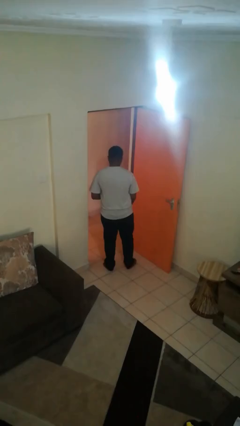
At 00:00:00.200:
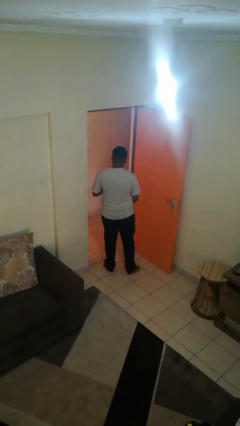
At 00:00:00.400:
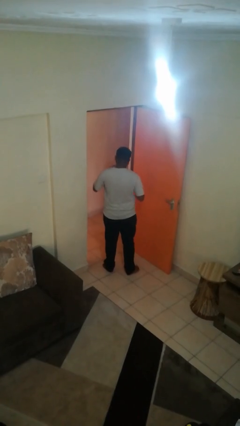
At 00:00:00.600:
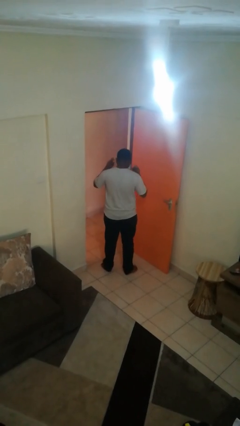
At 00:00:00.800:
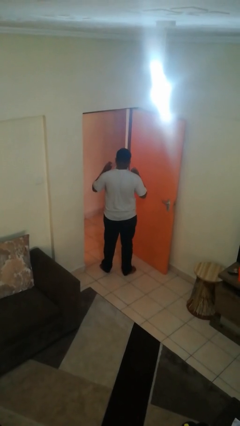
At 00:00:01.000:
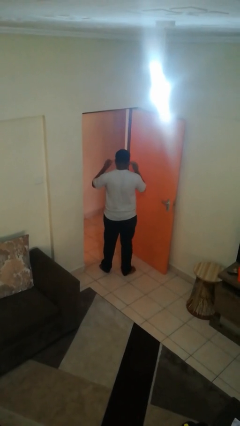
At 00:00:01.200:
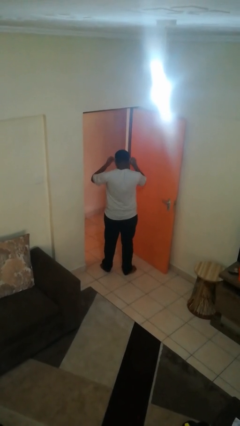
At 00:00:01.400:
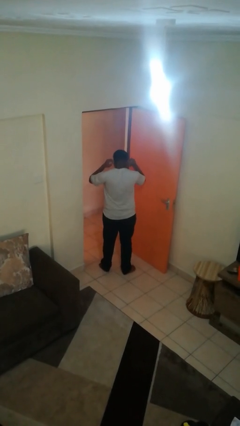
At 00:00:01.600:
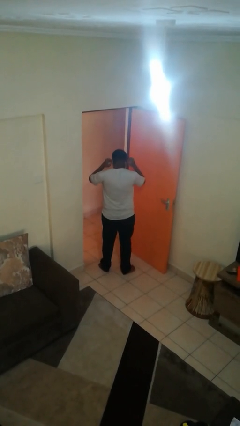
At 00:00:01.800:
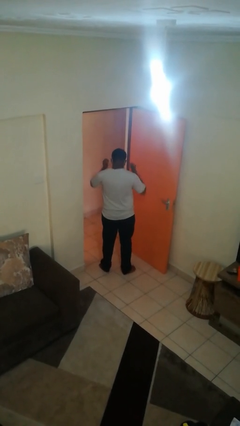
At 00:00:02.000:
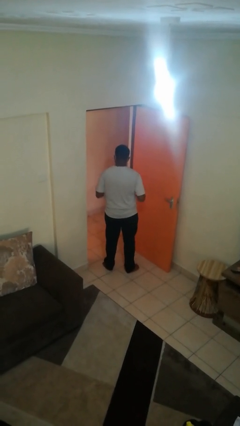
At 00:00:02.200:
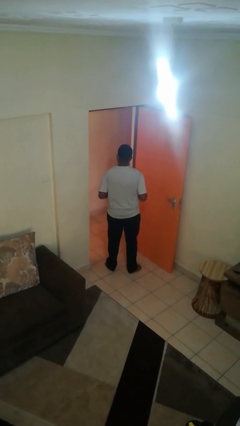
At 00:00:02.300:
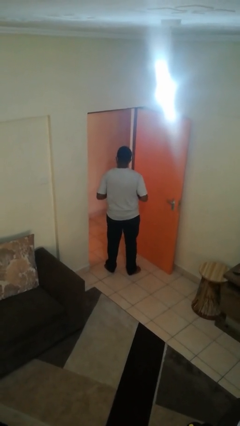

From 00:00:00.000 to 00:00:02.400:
person puts on facemask

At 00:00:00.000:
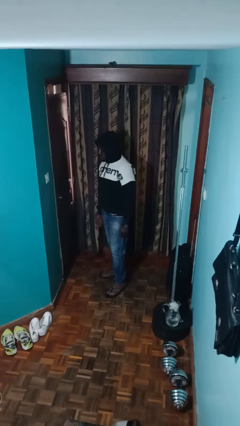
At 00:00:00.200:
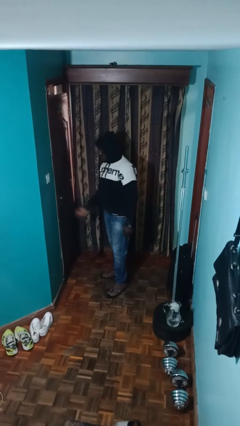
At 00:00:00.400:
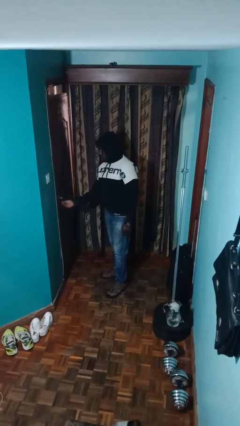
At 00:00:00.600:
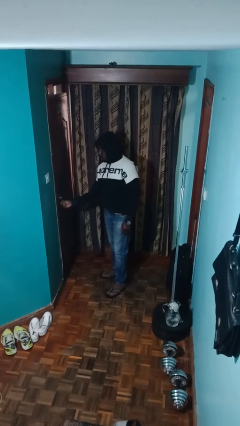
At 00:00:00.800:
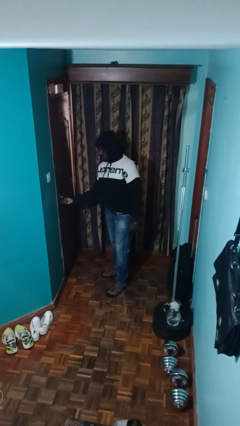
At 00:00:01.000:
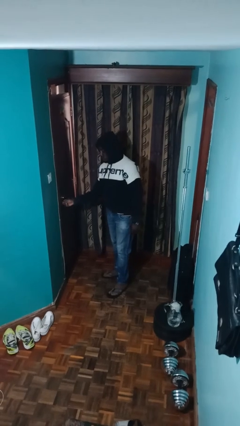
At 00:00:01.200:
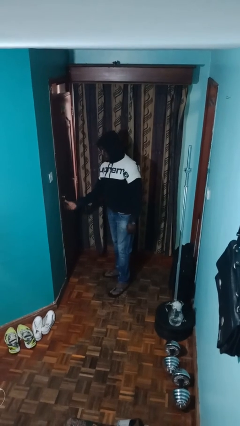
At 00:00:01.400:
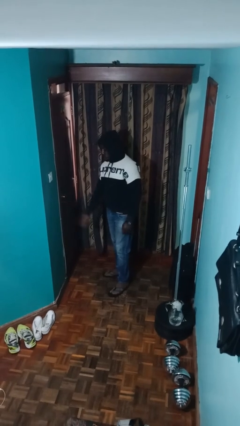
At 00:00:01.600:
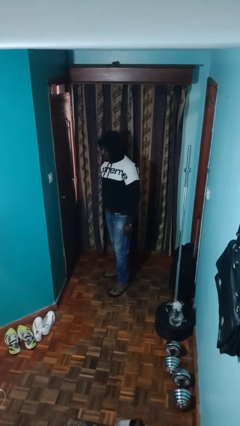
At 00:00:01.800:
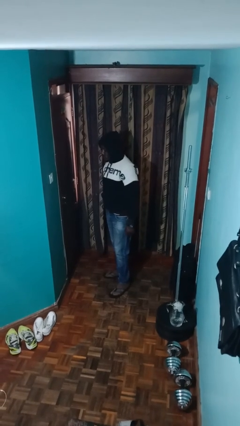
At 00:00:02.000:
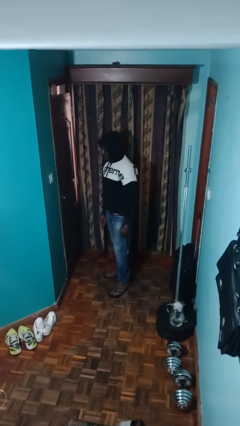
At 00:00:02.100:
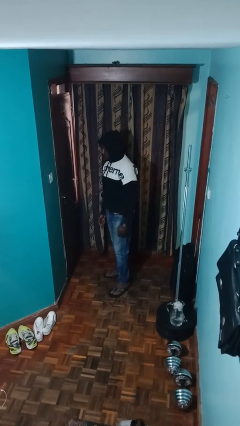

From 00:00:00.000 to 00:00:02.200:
person locks door with keys

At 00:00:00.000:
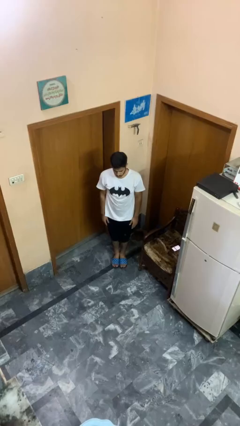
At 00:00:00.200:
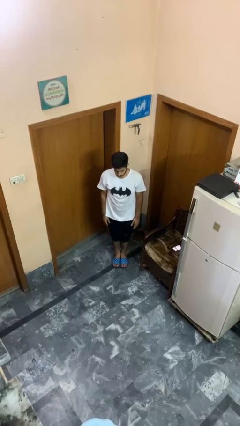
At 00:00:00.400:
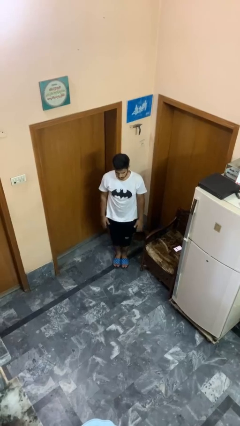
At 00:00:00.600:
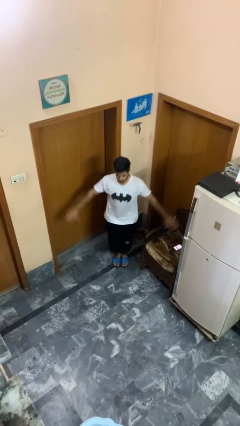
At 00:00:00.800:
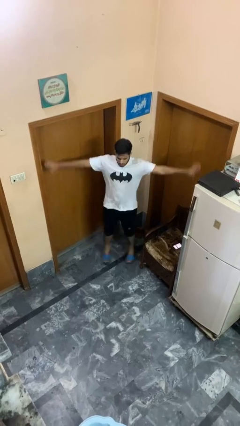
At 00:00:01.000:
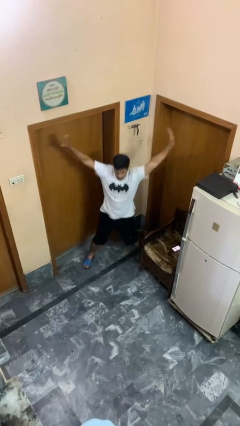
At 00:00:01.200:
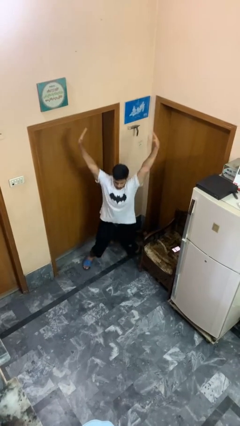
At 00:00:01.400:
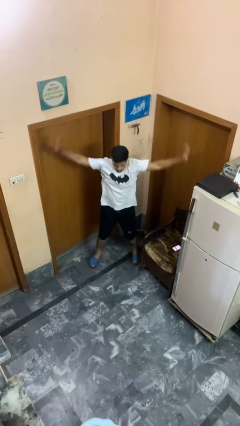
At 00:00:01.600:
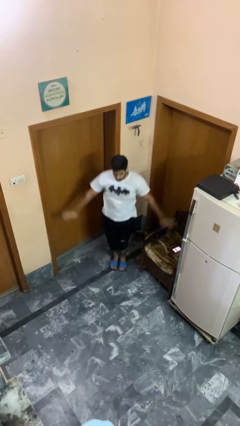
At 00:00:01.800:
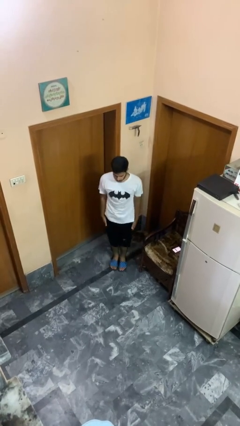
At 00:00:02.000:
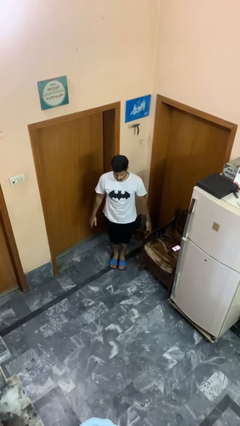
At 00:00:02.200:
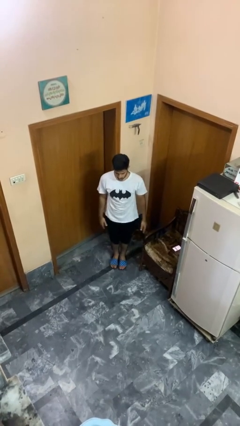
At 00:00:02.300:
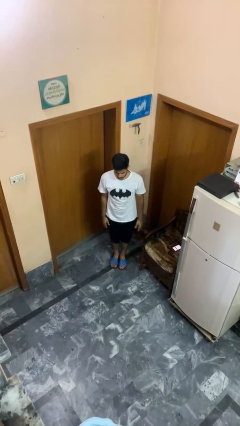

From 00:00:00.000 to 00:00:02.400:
person exercises with jumping jacks

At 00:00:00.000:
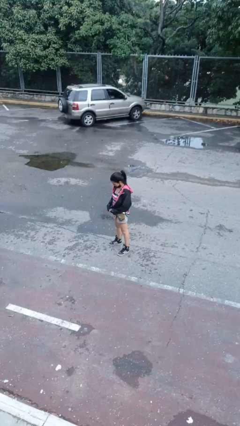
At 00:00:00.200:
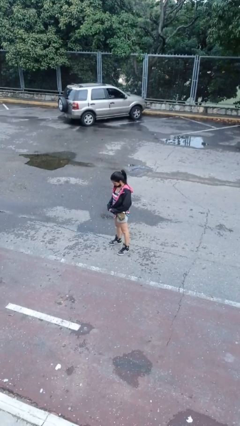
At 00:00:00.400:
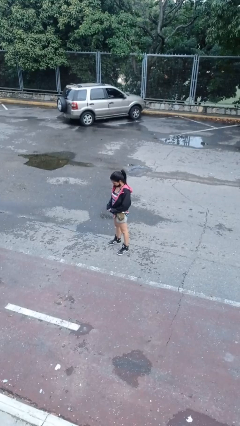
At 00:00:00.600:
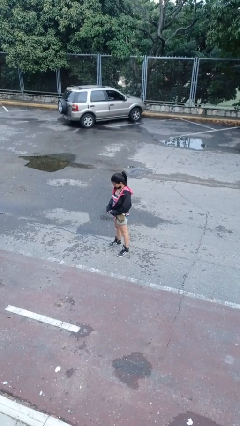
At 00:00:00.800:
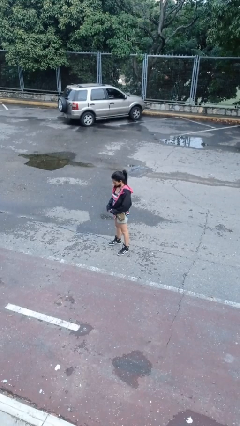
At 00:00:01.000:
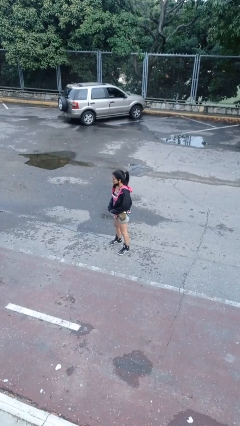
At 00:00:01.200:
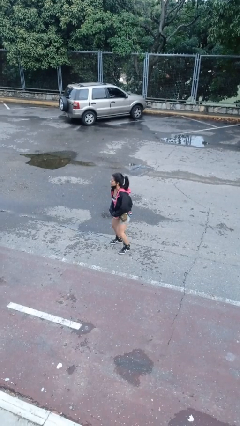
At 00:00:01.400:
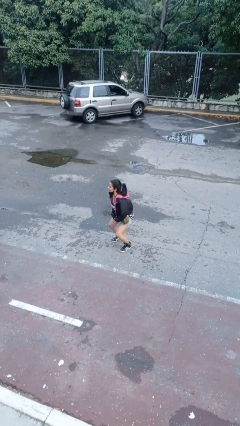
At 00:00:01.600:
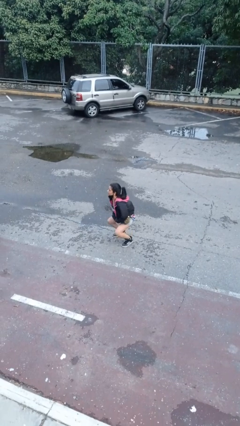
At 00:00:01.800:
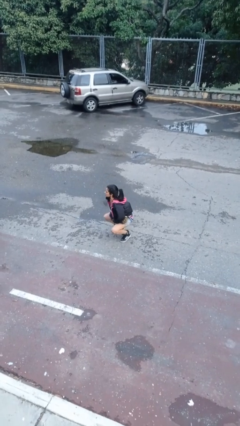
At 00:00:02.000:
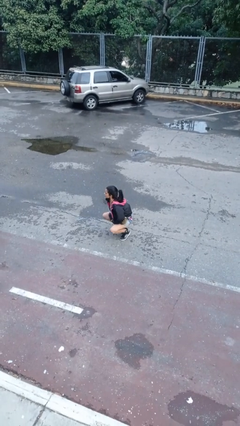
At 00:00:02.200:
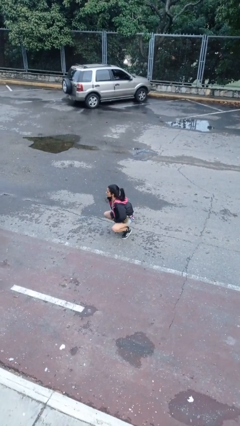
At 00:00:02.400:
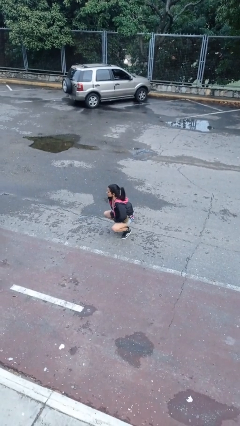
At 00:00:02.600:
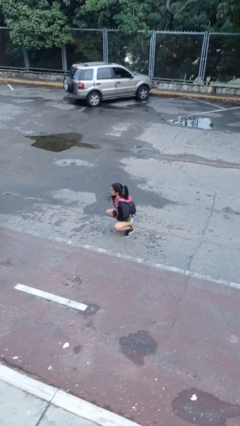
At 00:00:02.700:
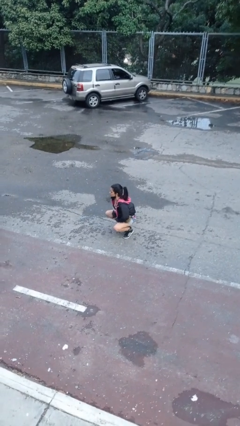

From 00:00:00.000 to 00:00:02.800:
person squats

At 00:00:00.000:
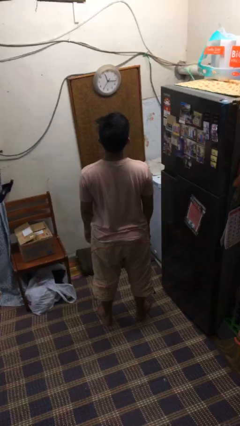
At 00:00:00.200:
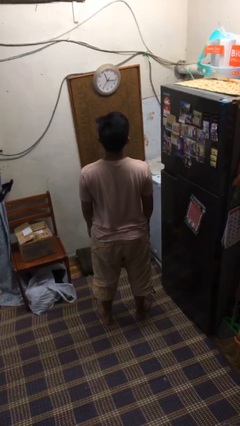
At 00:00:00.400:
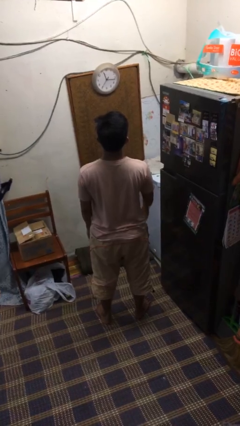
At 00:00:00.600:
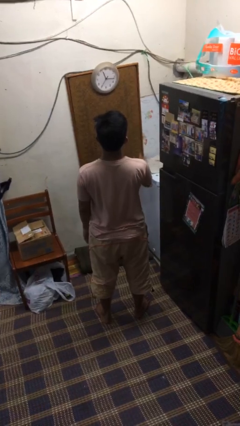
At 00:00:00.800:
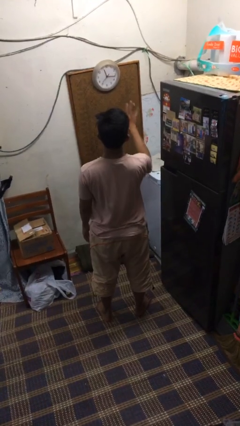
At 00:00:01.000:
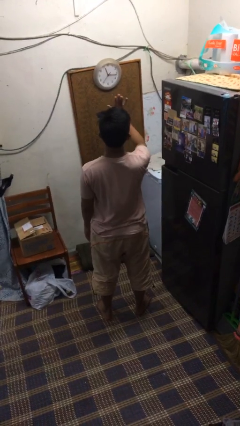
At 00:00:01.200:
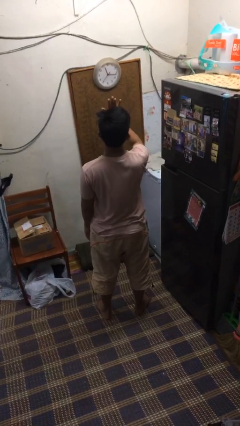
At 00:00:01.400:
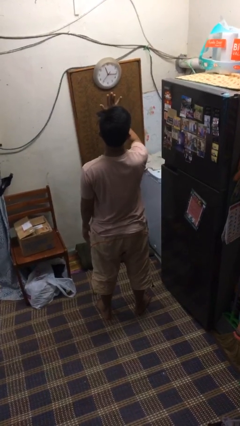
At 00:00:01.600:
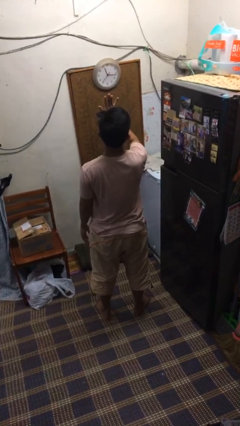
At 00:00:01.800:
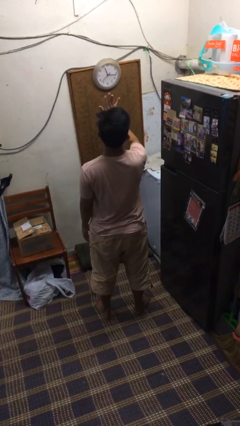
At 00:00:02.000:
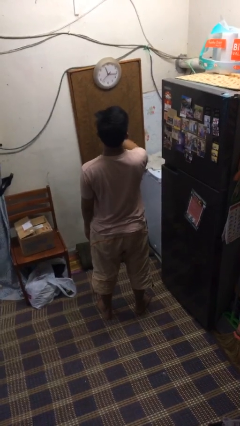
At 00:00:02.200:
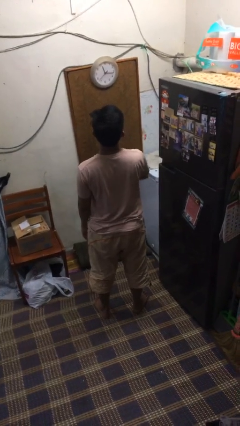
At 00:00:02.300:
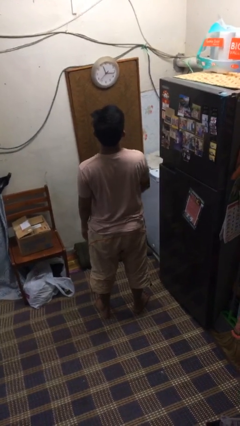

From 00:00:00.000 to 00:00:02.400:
person gestures stop

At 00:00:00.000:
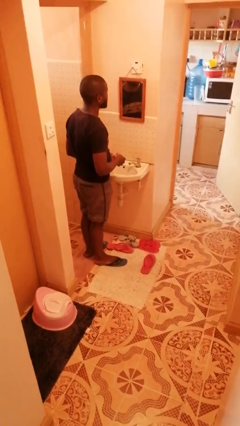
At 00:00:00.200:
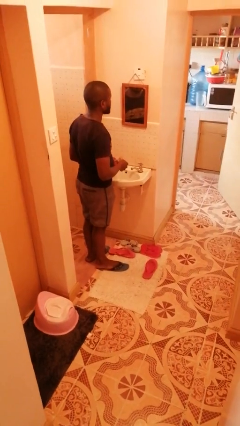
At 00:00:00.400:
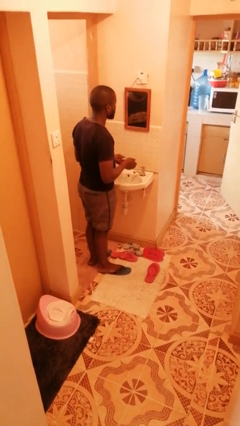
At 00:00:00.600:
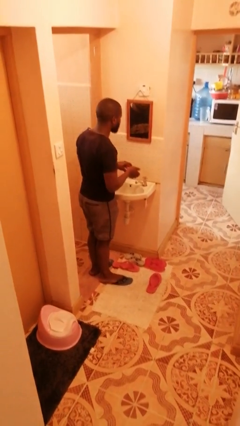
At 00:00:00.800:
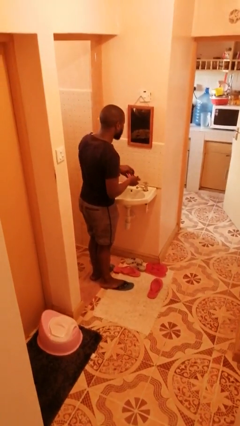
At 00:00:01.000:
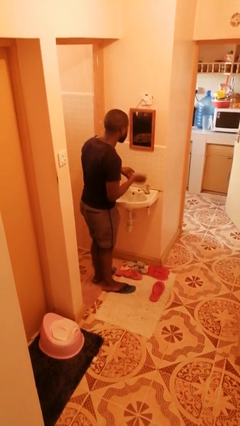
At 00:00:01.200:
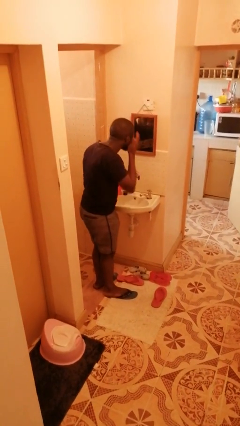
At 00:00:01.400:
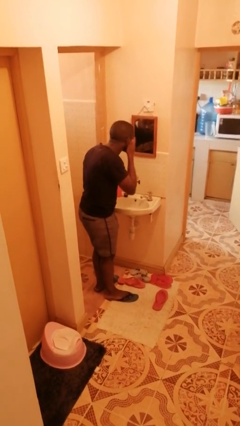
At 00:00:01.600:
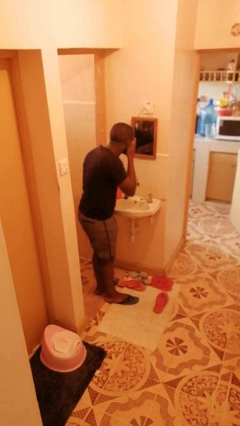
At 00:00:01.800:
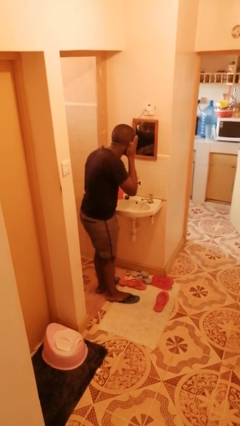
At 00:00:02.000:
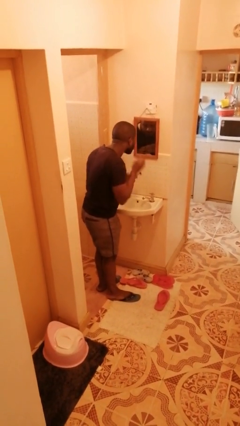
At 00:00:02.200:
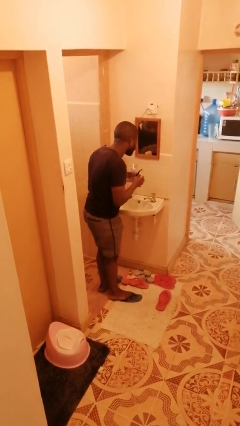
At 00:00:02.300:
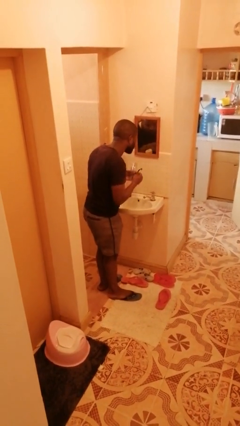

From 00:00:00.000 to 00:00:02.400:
person applies shaving cream

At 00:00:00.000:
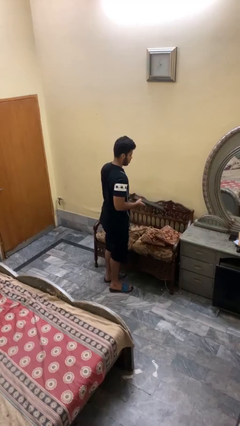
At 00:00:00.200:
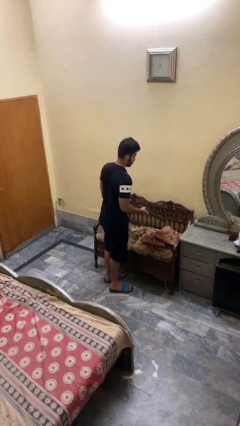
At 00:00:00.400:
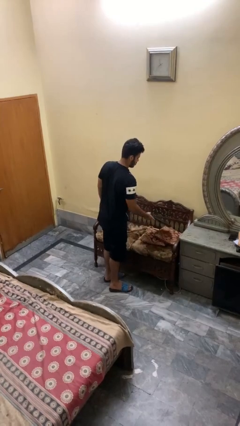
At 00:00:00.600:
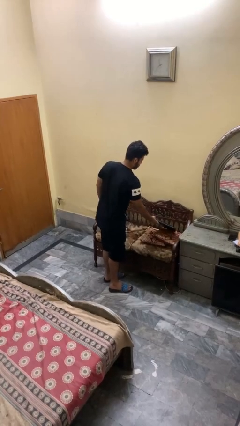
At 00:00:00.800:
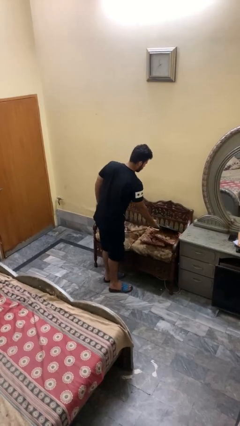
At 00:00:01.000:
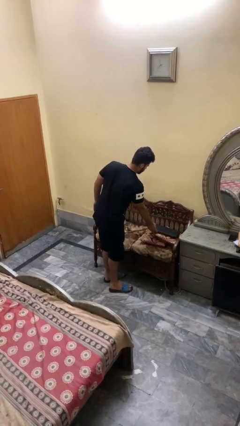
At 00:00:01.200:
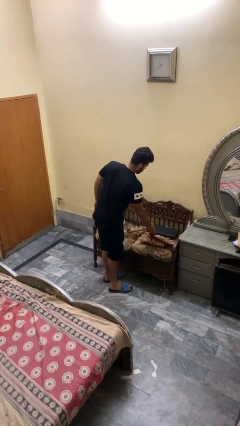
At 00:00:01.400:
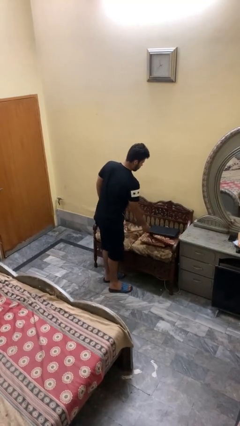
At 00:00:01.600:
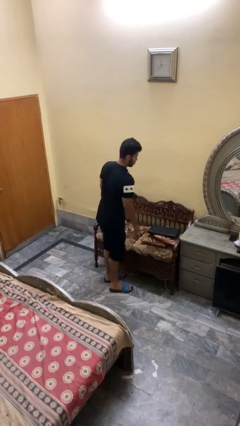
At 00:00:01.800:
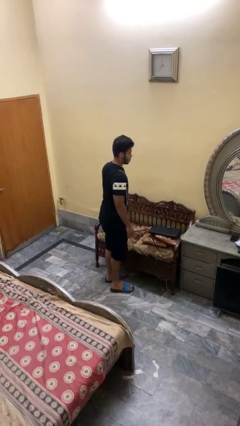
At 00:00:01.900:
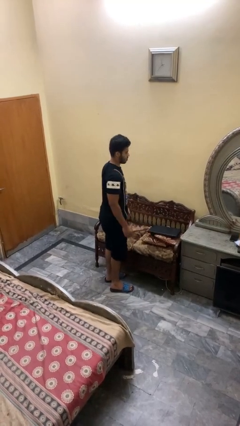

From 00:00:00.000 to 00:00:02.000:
person puts down object on couch
